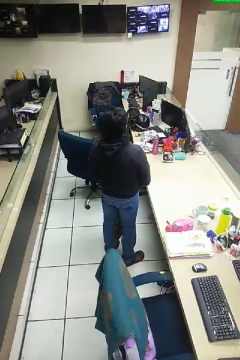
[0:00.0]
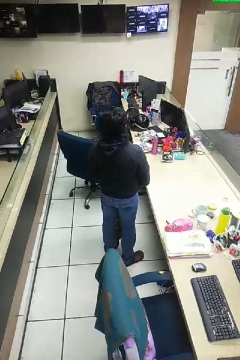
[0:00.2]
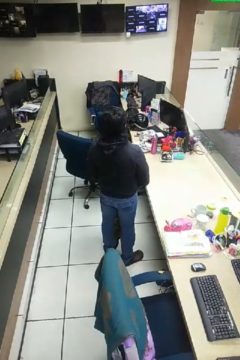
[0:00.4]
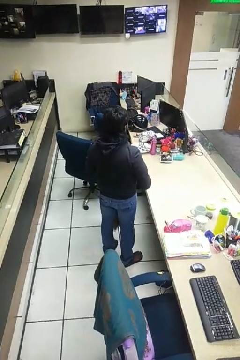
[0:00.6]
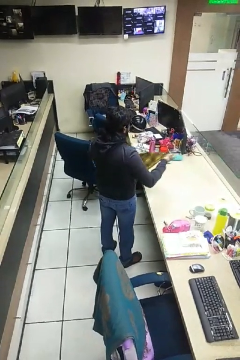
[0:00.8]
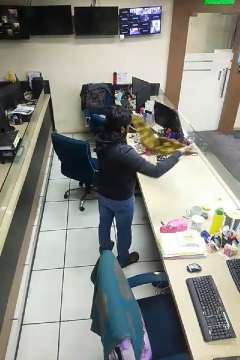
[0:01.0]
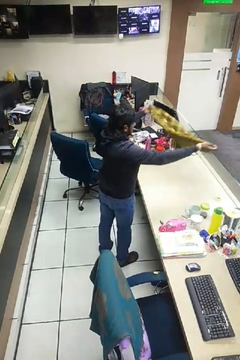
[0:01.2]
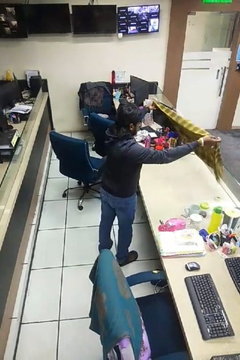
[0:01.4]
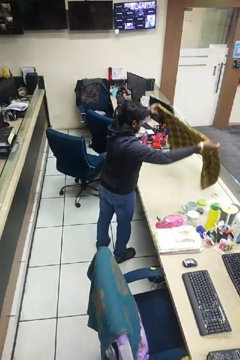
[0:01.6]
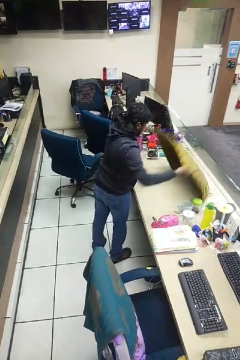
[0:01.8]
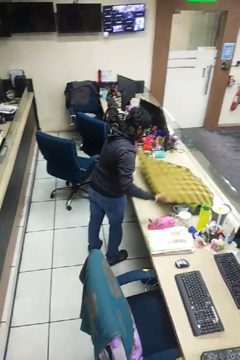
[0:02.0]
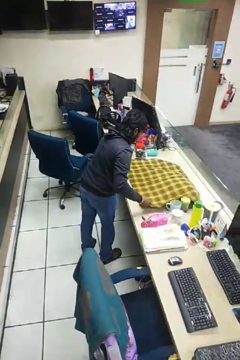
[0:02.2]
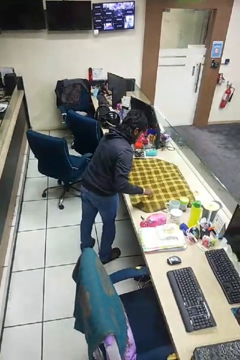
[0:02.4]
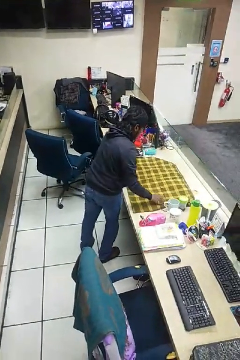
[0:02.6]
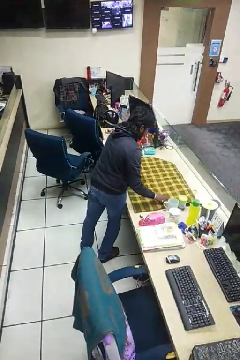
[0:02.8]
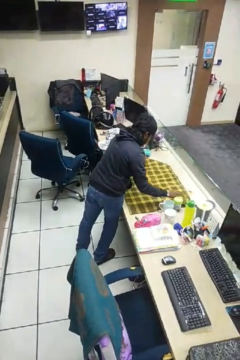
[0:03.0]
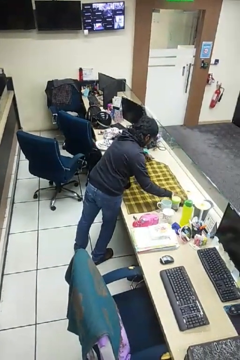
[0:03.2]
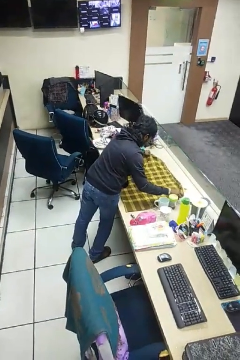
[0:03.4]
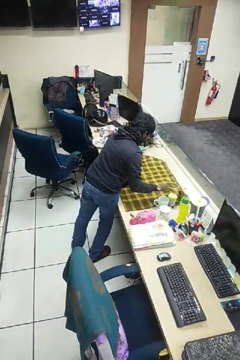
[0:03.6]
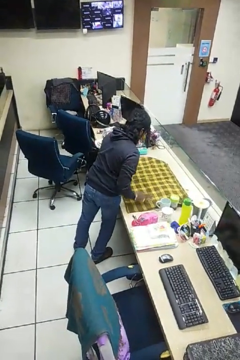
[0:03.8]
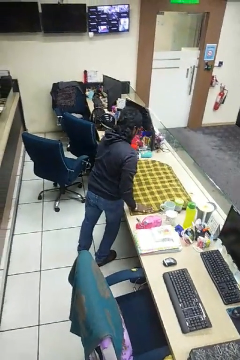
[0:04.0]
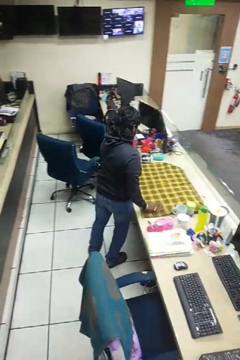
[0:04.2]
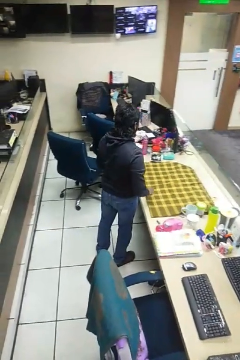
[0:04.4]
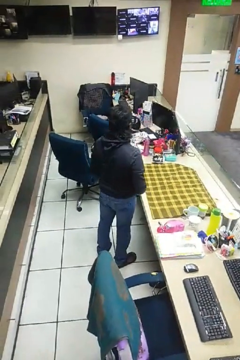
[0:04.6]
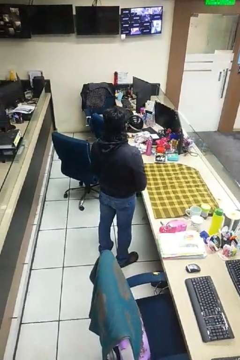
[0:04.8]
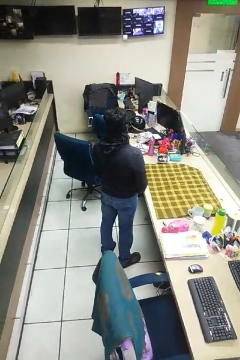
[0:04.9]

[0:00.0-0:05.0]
person spreads tablecloth

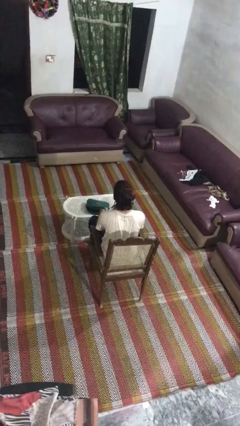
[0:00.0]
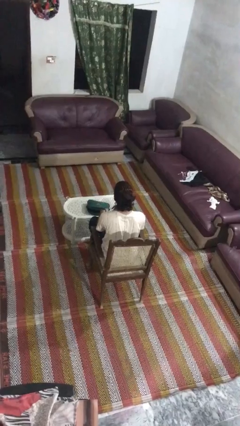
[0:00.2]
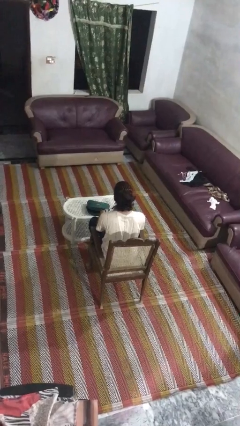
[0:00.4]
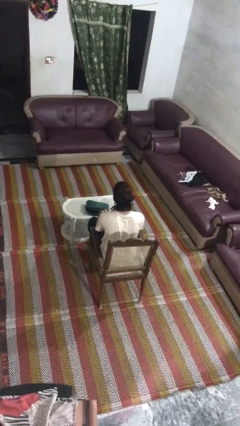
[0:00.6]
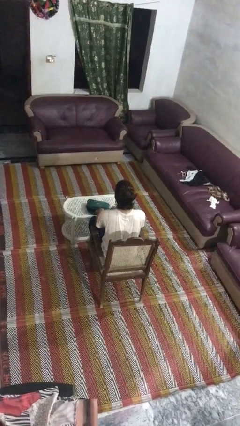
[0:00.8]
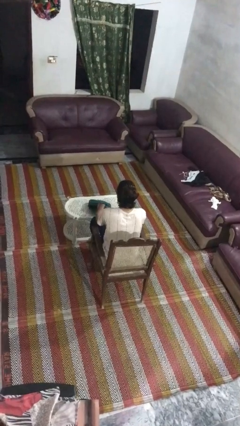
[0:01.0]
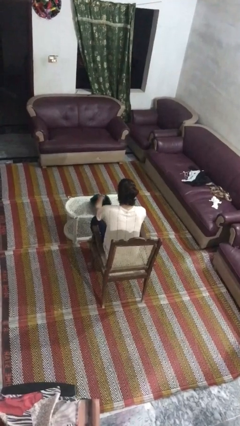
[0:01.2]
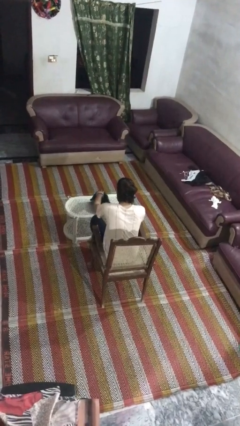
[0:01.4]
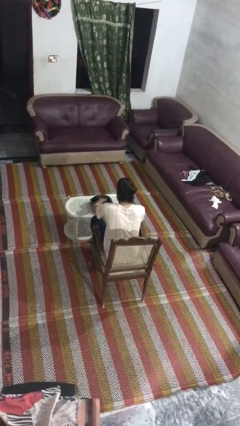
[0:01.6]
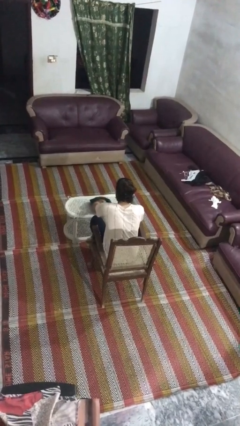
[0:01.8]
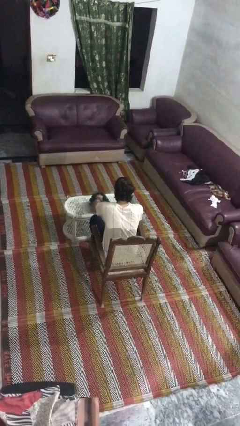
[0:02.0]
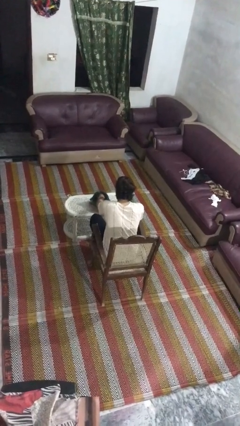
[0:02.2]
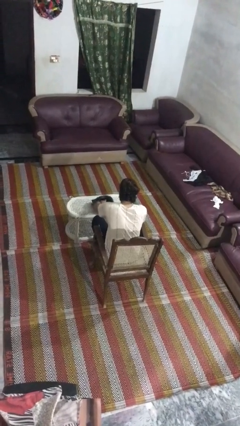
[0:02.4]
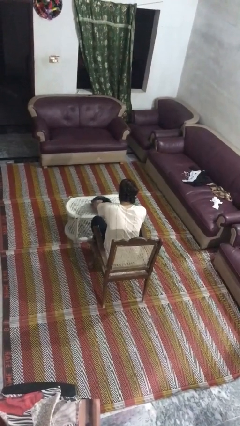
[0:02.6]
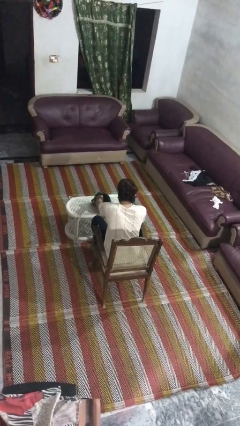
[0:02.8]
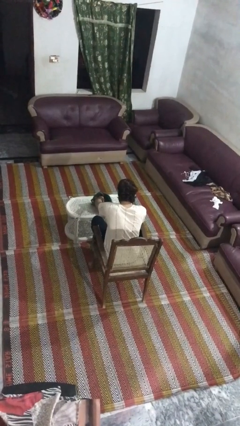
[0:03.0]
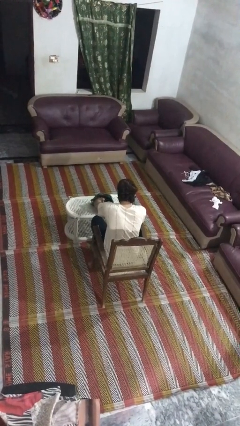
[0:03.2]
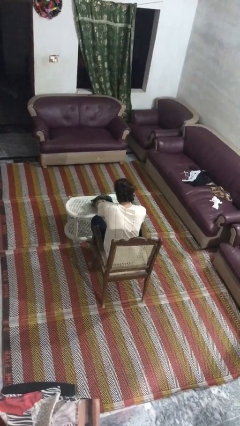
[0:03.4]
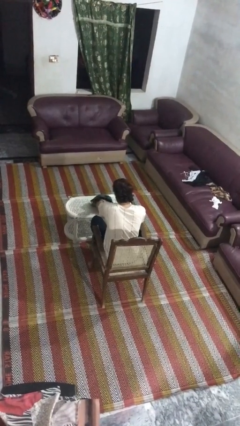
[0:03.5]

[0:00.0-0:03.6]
person searches in purse

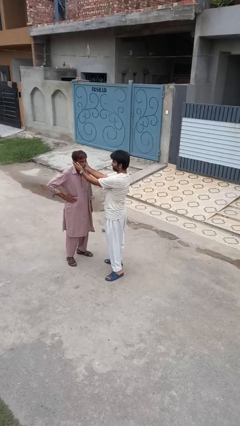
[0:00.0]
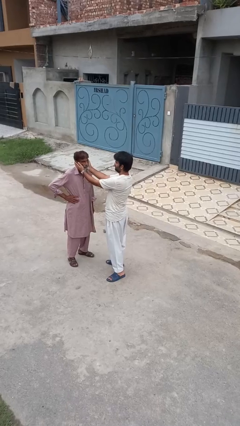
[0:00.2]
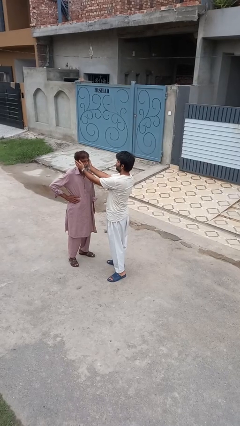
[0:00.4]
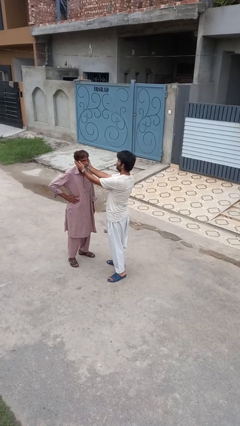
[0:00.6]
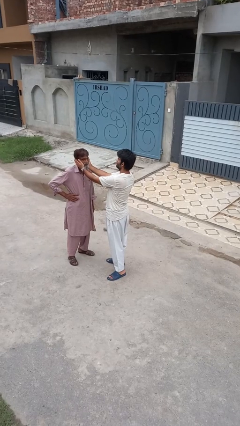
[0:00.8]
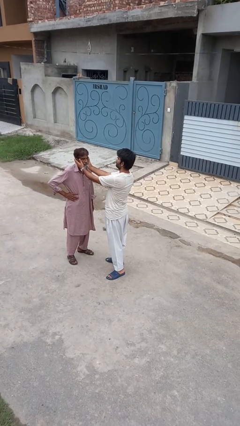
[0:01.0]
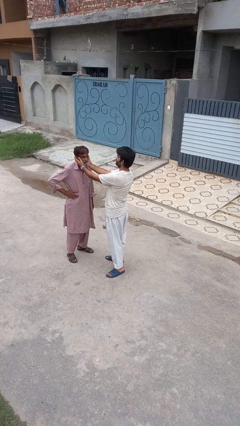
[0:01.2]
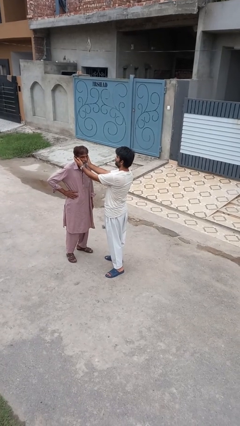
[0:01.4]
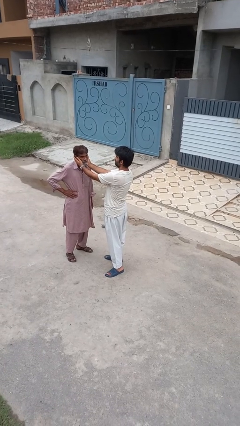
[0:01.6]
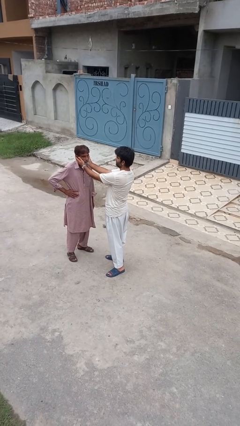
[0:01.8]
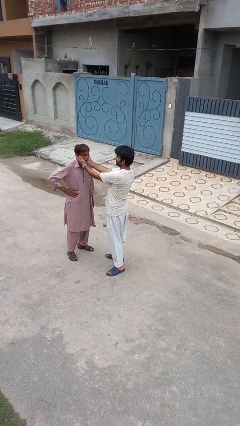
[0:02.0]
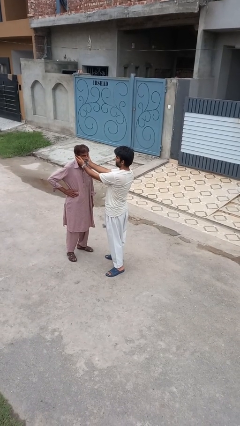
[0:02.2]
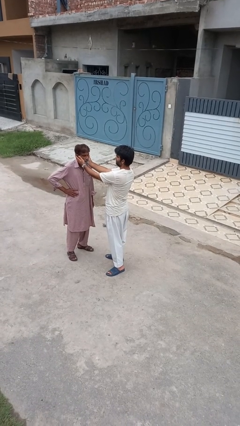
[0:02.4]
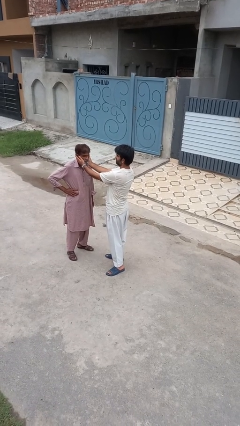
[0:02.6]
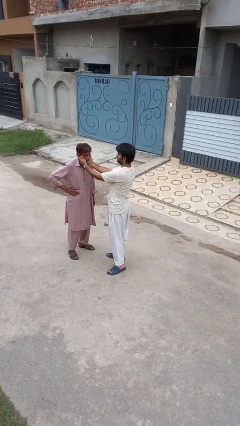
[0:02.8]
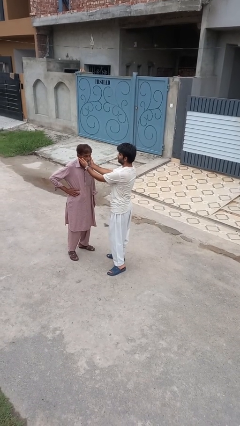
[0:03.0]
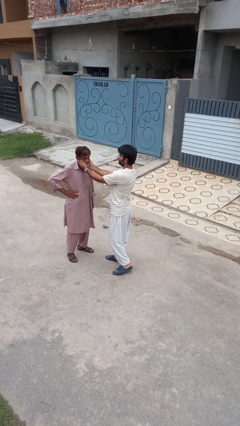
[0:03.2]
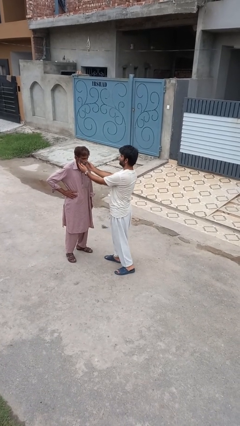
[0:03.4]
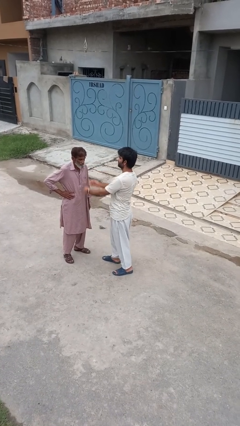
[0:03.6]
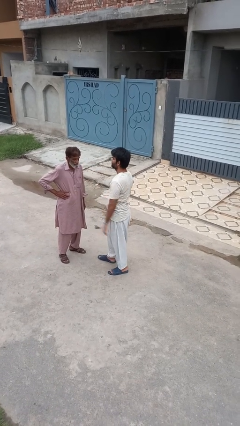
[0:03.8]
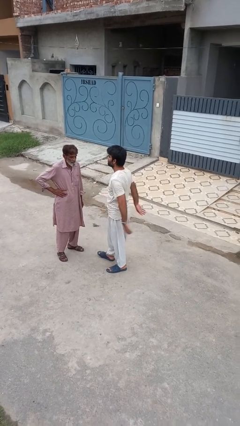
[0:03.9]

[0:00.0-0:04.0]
person touches face of person

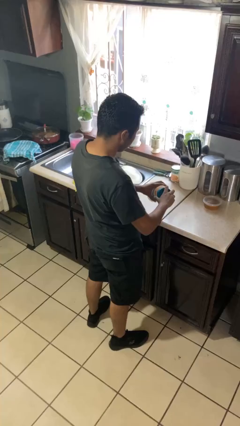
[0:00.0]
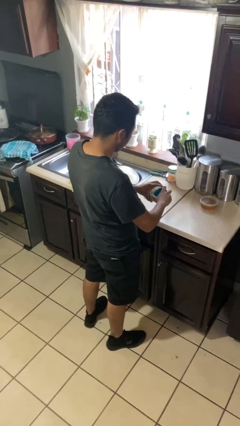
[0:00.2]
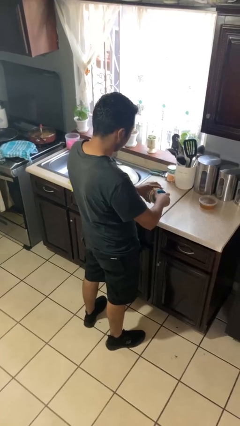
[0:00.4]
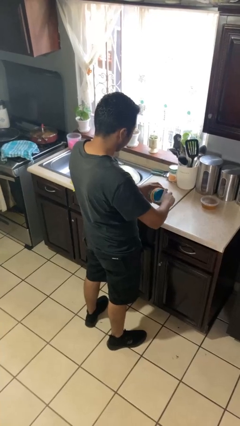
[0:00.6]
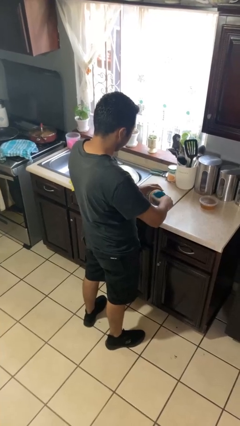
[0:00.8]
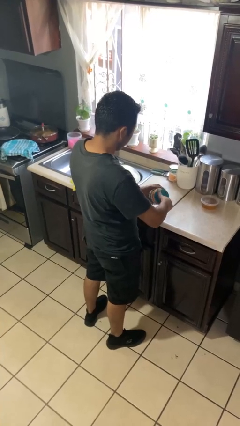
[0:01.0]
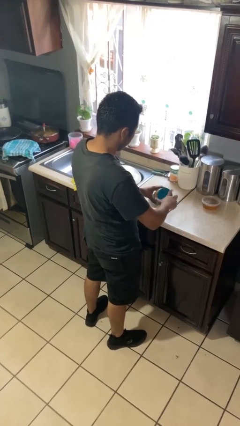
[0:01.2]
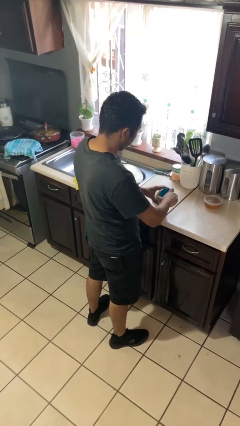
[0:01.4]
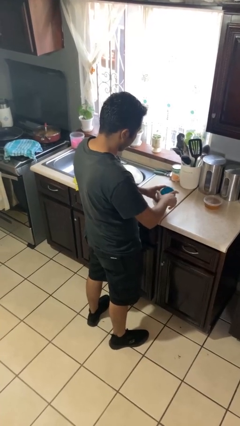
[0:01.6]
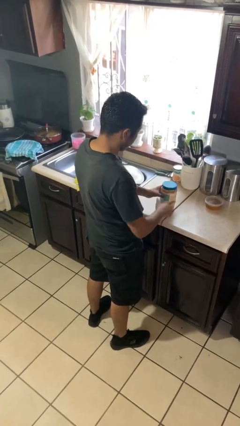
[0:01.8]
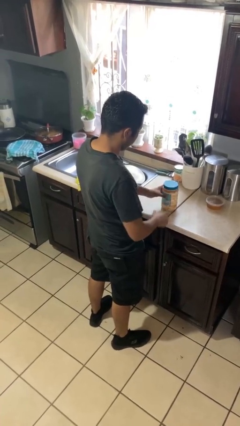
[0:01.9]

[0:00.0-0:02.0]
person closes jar

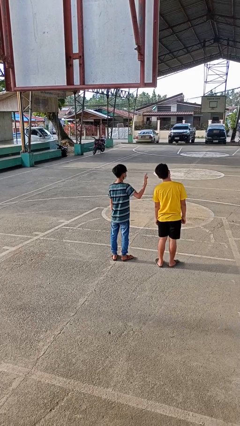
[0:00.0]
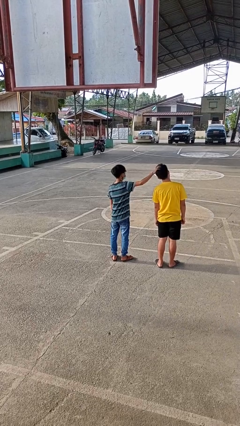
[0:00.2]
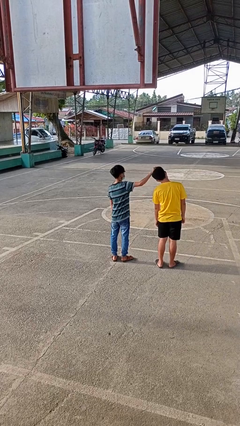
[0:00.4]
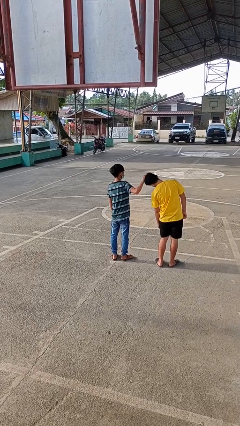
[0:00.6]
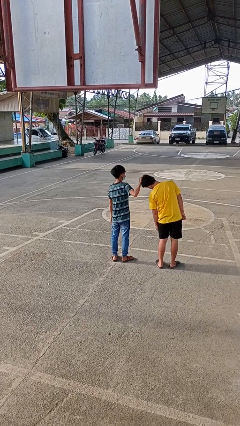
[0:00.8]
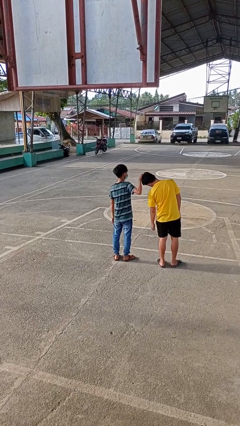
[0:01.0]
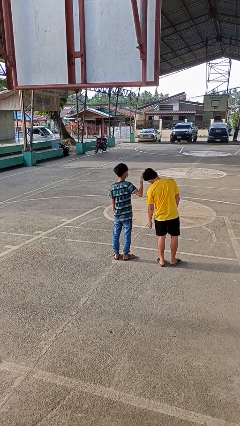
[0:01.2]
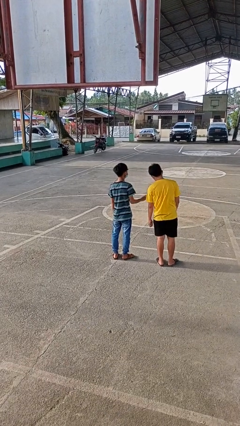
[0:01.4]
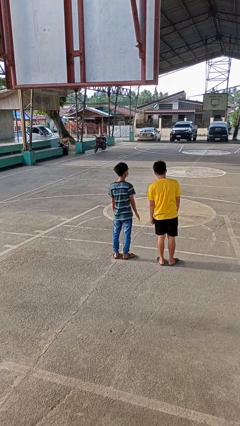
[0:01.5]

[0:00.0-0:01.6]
person grabs person by hair

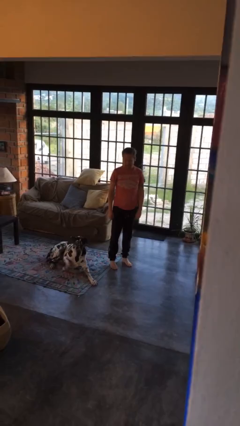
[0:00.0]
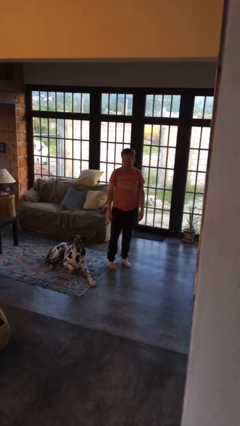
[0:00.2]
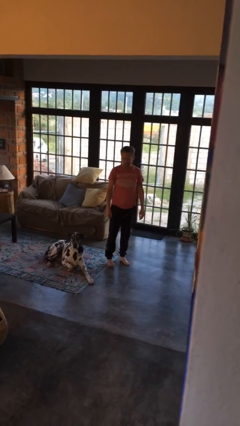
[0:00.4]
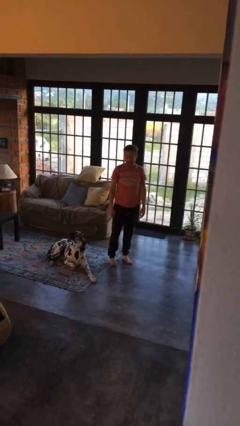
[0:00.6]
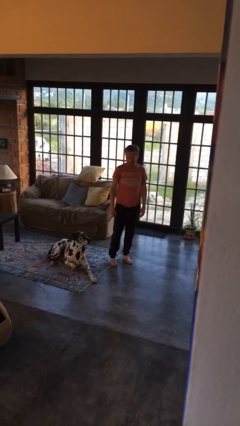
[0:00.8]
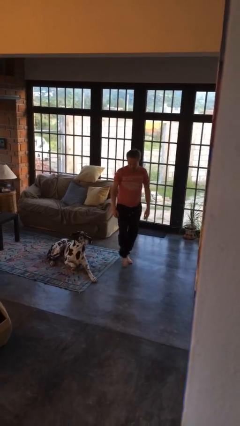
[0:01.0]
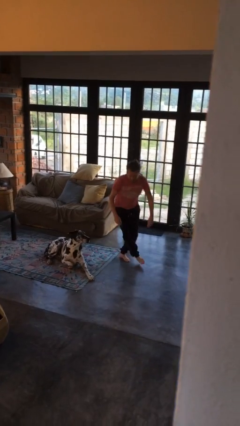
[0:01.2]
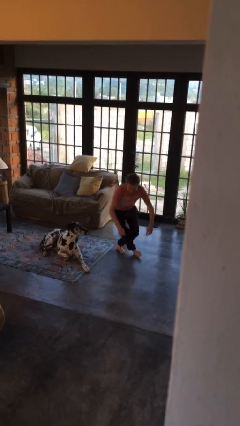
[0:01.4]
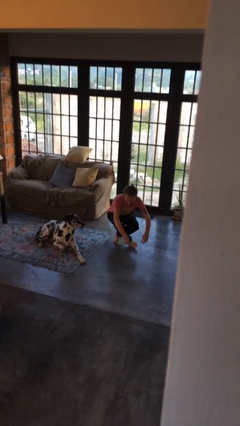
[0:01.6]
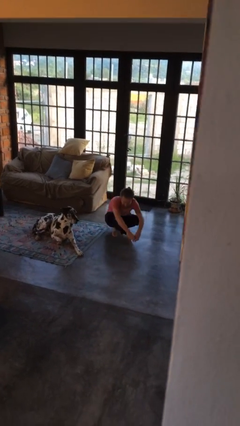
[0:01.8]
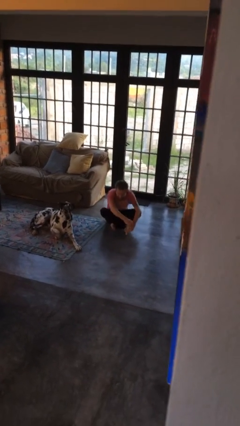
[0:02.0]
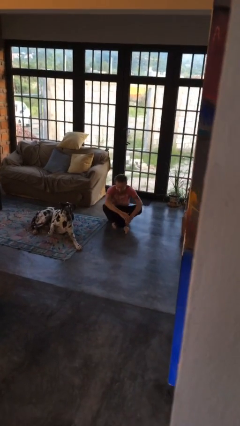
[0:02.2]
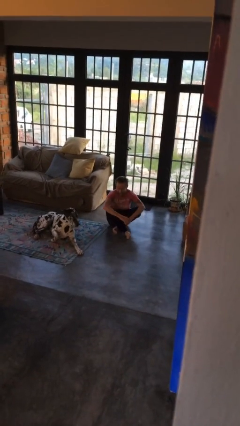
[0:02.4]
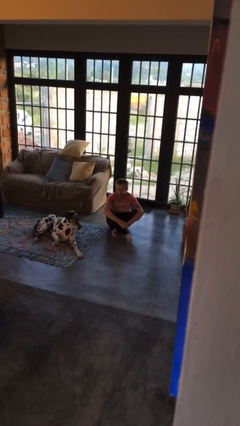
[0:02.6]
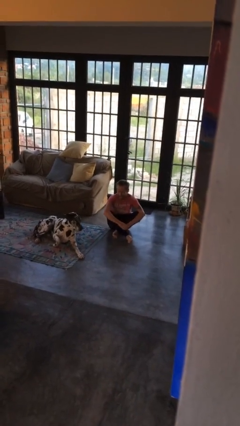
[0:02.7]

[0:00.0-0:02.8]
person sits crisscross
